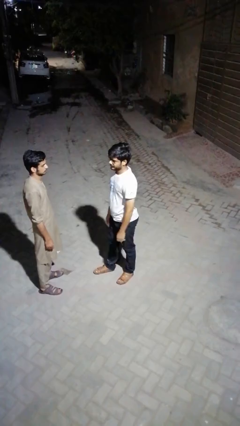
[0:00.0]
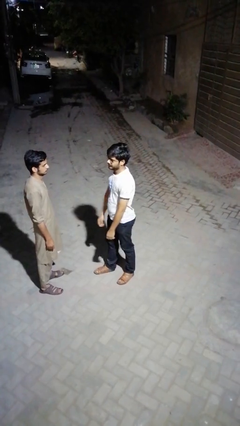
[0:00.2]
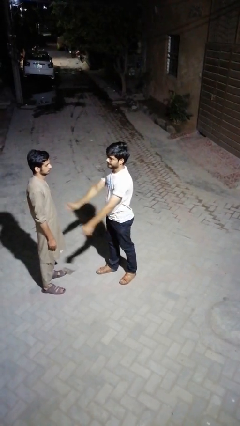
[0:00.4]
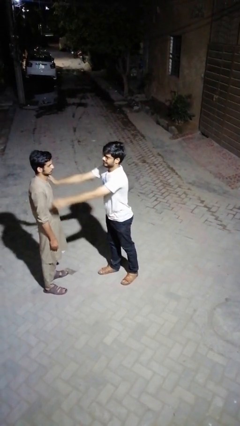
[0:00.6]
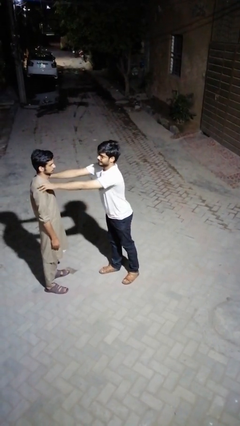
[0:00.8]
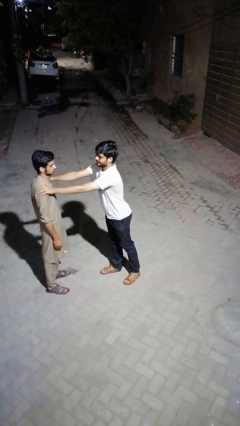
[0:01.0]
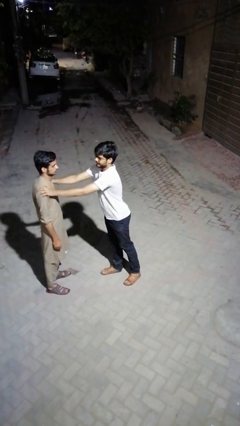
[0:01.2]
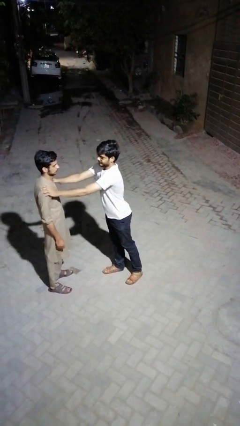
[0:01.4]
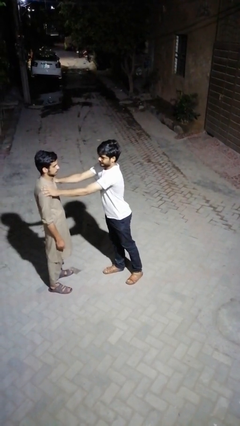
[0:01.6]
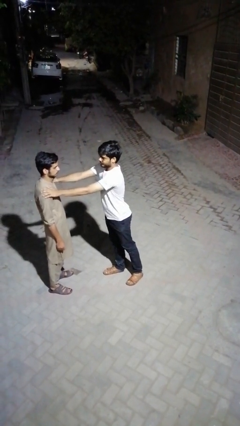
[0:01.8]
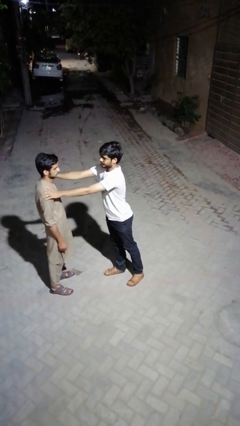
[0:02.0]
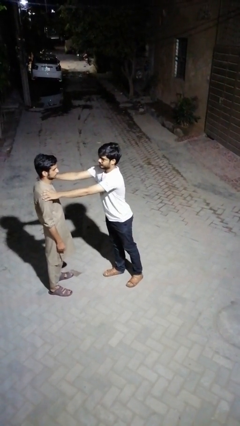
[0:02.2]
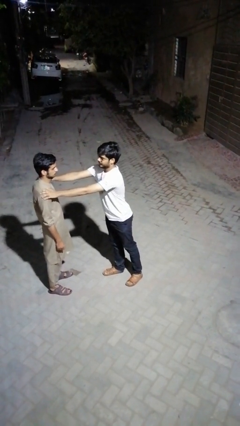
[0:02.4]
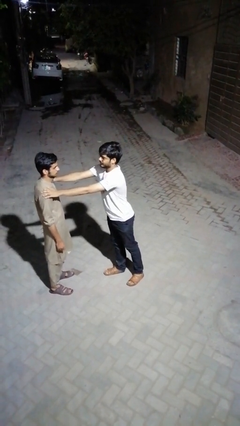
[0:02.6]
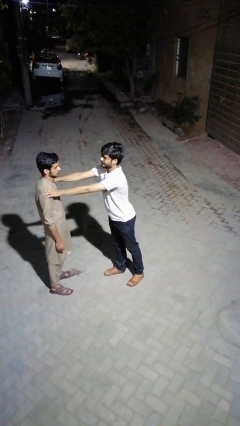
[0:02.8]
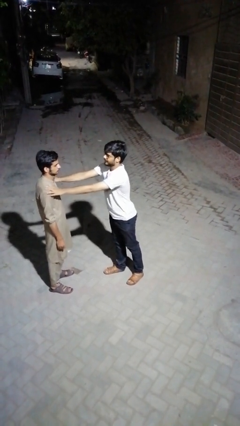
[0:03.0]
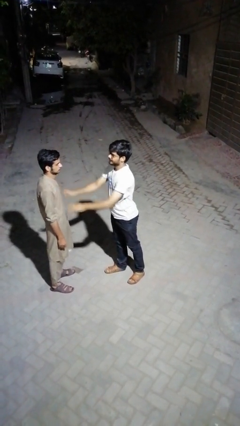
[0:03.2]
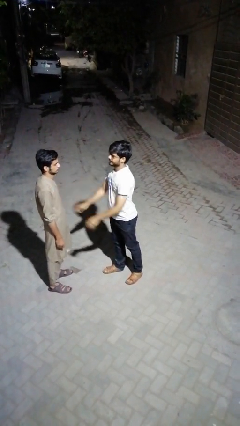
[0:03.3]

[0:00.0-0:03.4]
person pounds shoulders of person

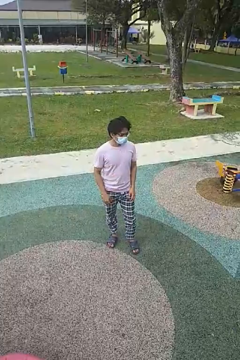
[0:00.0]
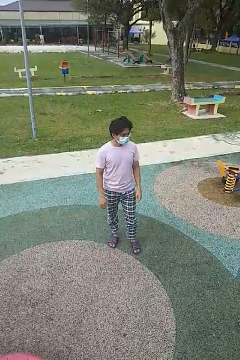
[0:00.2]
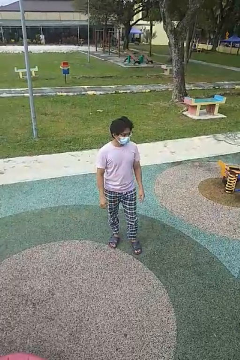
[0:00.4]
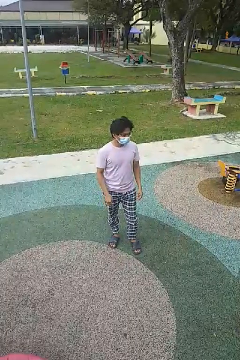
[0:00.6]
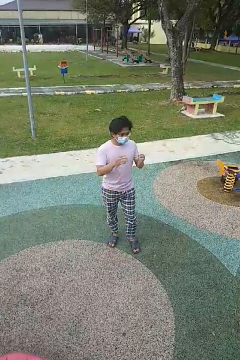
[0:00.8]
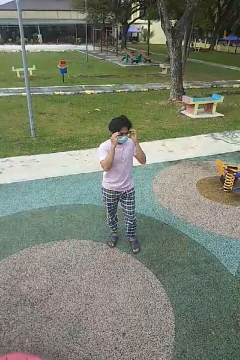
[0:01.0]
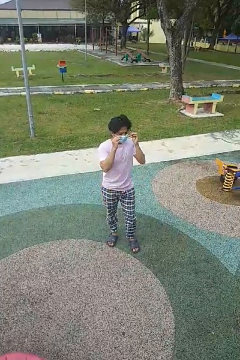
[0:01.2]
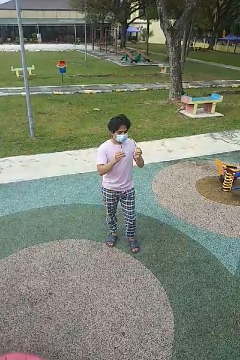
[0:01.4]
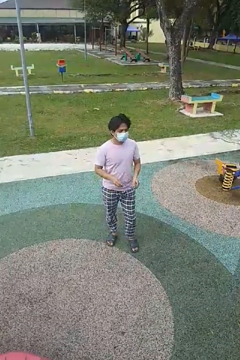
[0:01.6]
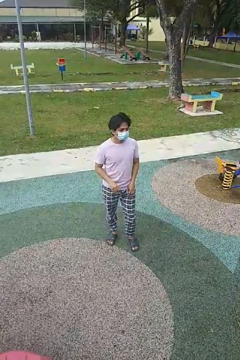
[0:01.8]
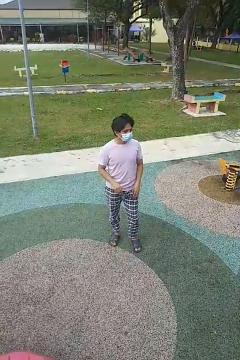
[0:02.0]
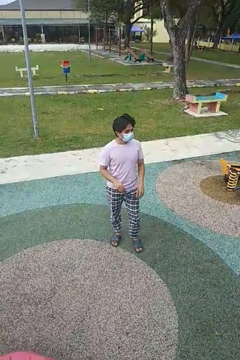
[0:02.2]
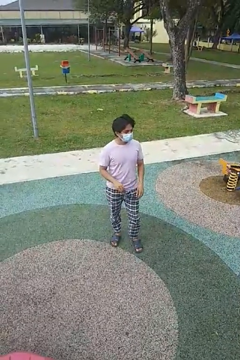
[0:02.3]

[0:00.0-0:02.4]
person takes off glasses

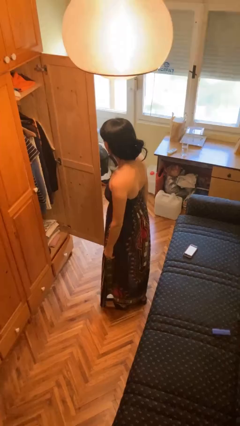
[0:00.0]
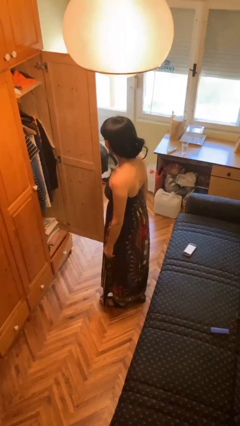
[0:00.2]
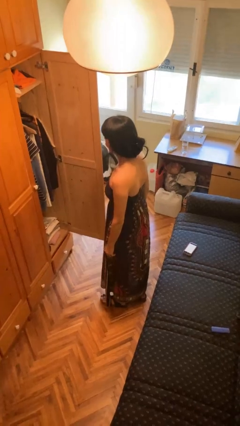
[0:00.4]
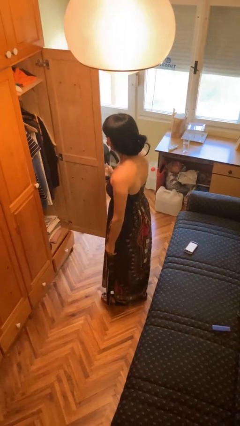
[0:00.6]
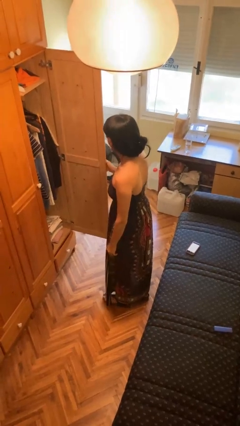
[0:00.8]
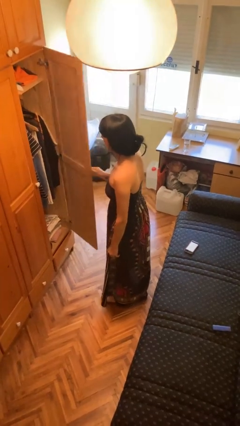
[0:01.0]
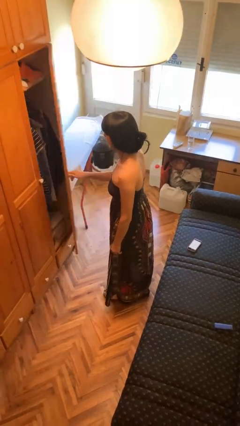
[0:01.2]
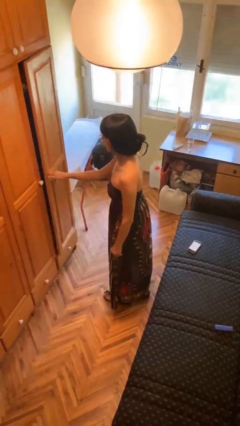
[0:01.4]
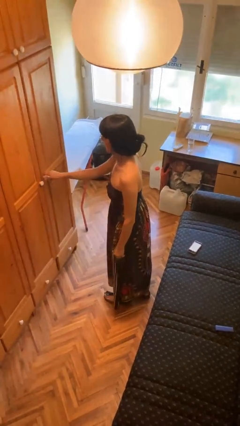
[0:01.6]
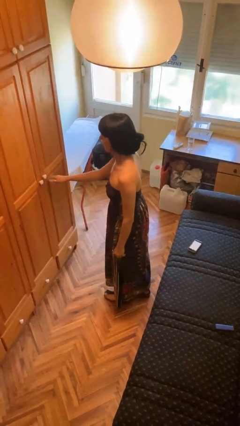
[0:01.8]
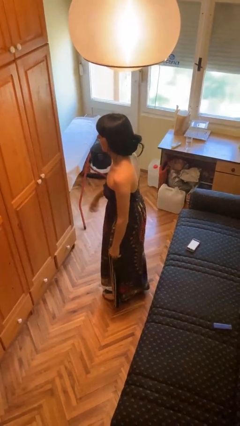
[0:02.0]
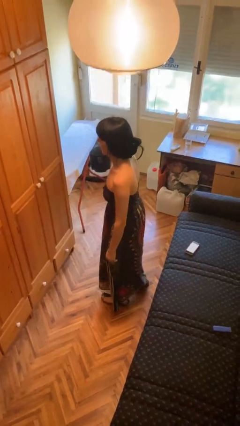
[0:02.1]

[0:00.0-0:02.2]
person closes closet door

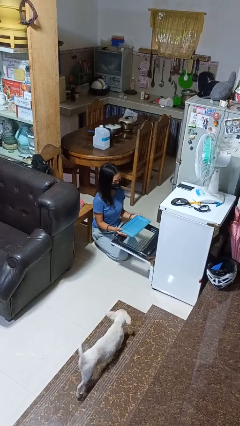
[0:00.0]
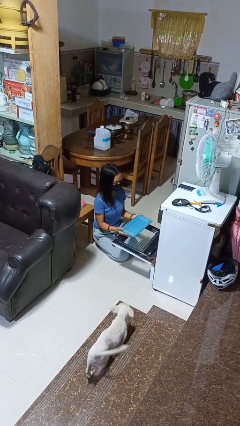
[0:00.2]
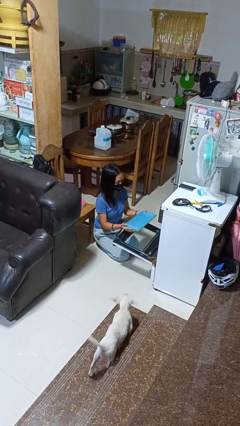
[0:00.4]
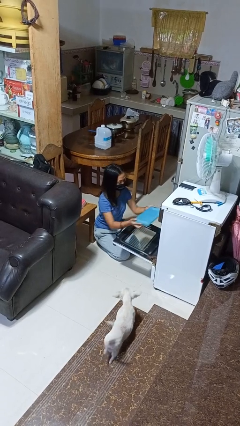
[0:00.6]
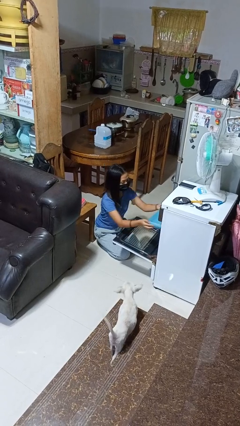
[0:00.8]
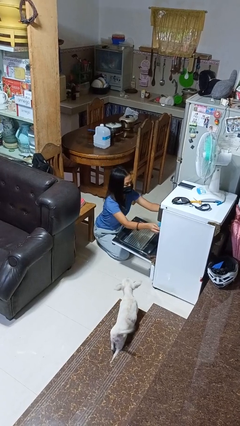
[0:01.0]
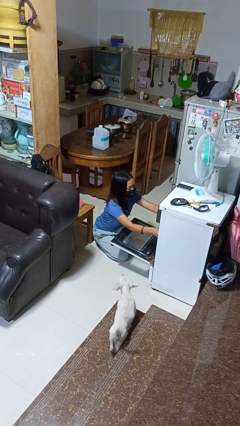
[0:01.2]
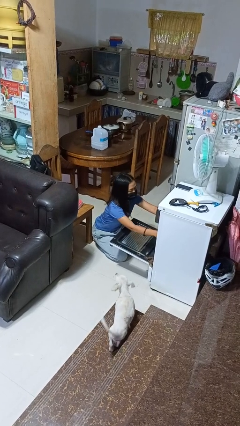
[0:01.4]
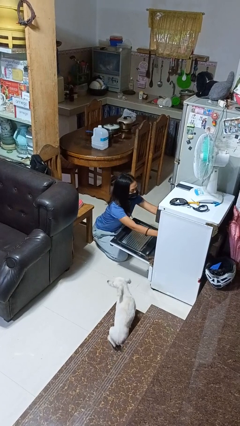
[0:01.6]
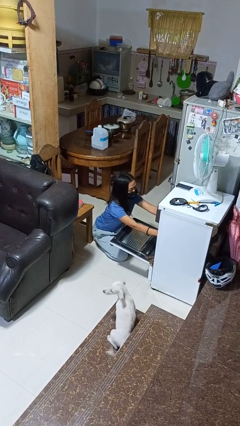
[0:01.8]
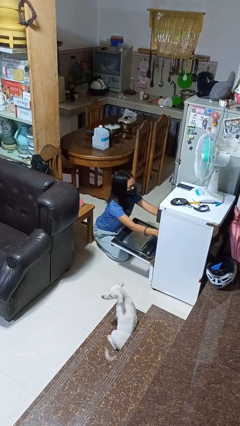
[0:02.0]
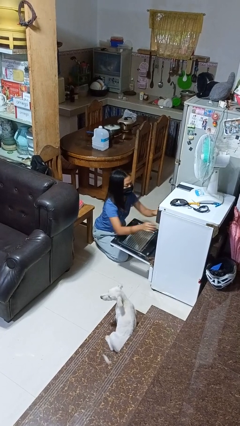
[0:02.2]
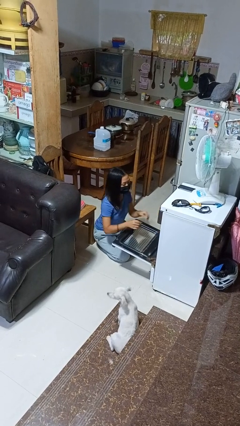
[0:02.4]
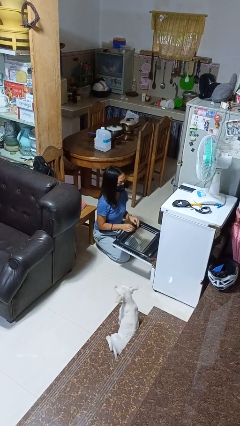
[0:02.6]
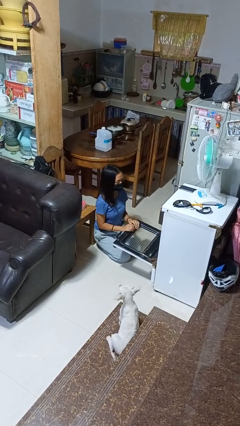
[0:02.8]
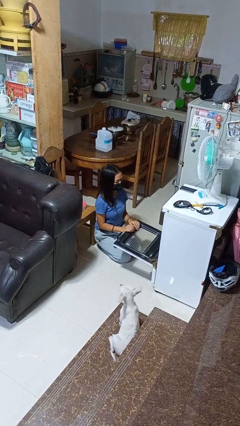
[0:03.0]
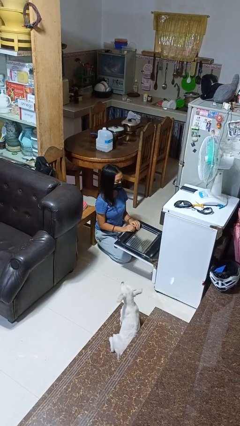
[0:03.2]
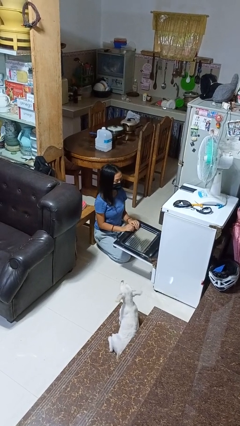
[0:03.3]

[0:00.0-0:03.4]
person puts object into oven

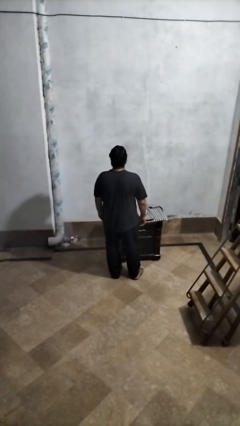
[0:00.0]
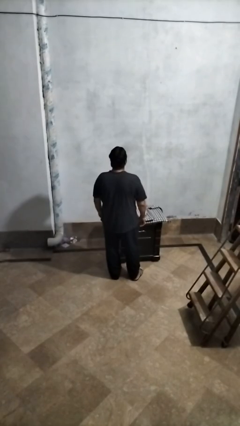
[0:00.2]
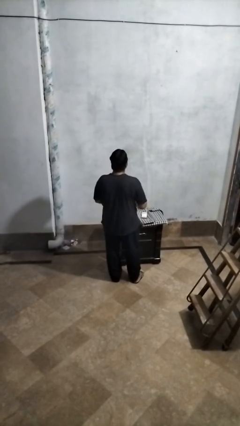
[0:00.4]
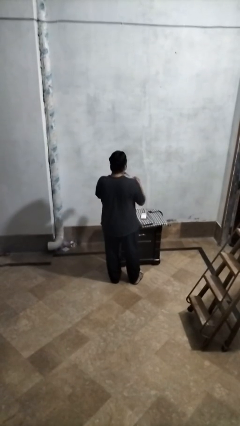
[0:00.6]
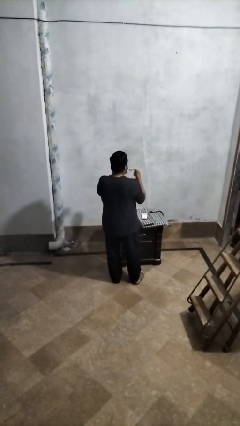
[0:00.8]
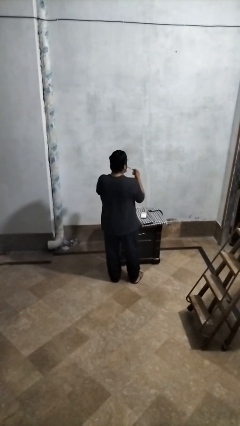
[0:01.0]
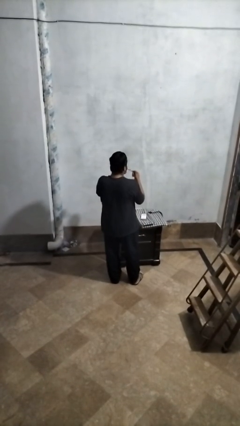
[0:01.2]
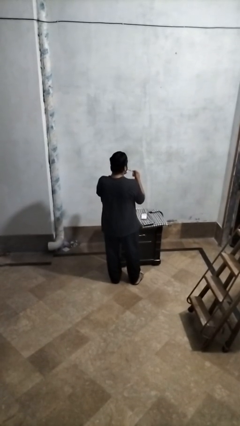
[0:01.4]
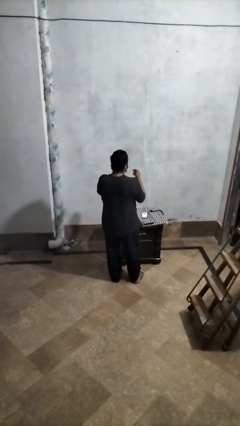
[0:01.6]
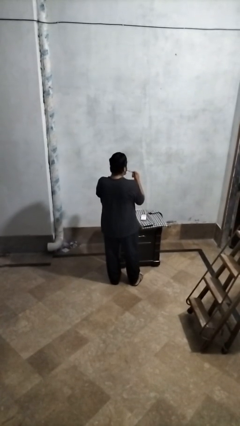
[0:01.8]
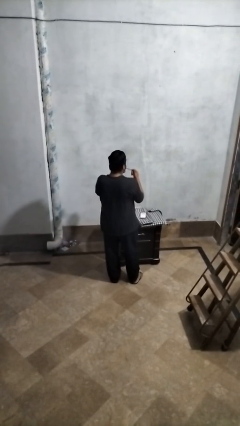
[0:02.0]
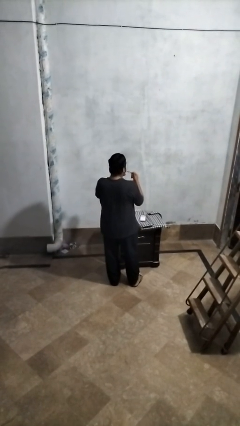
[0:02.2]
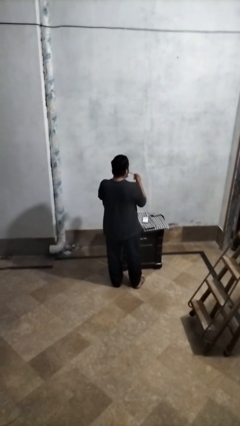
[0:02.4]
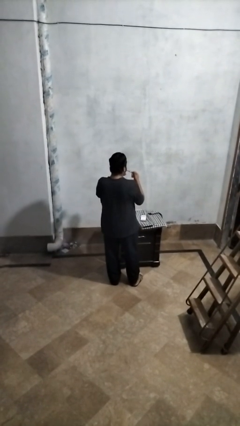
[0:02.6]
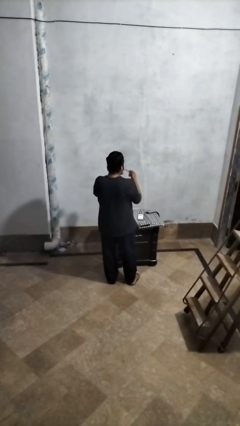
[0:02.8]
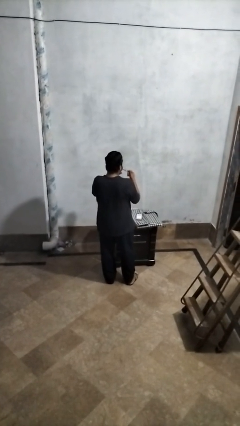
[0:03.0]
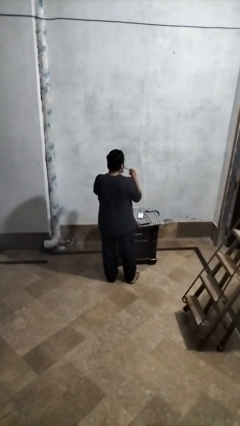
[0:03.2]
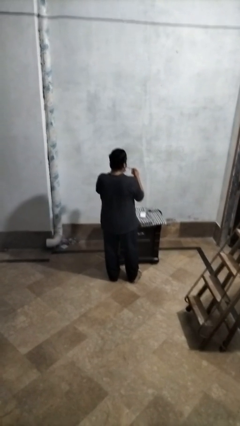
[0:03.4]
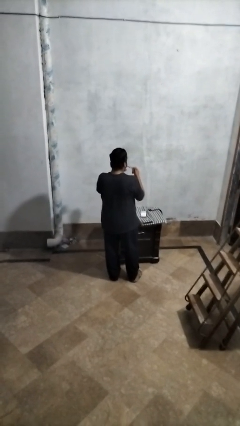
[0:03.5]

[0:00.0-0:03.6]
person clips fingernails

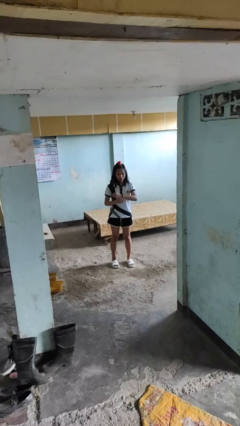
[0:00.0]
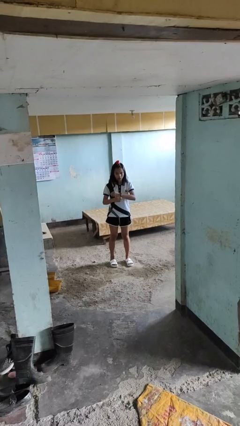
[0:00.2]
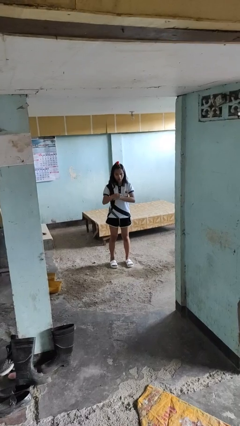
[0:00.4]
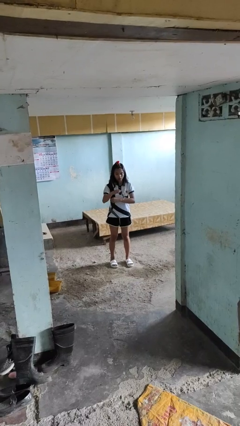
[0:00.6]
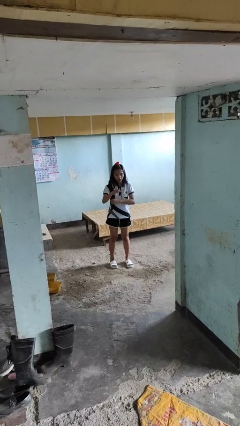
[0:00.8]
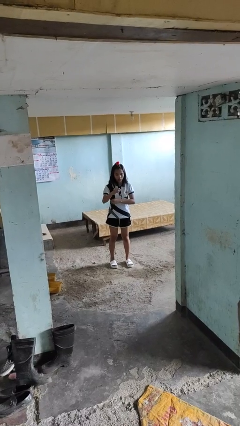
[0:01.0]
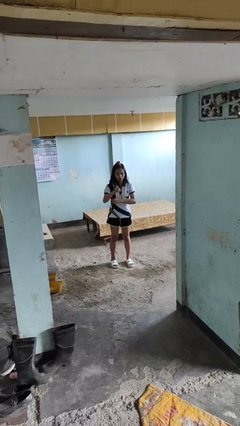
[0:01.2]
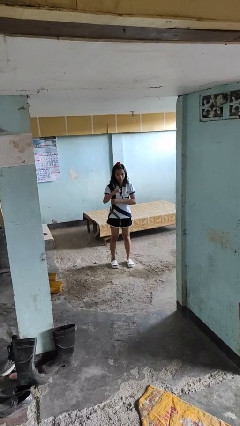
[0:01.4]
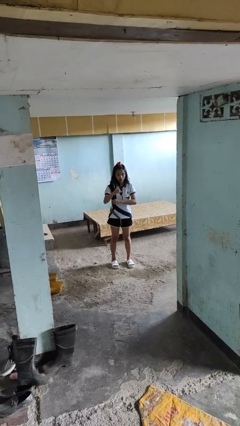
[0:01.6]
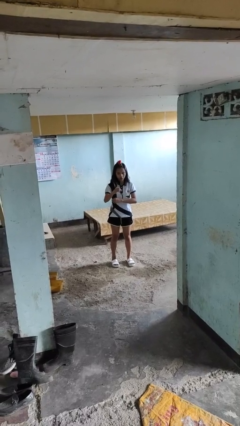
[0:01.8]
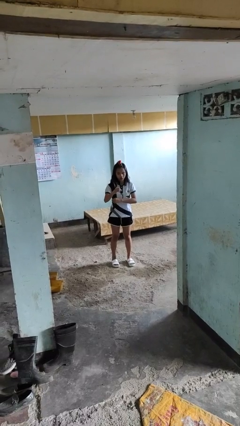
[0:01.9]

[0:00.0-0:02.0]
person takes off wristwatch

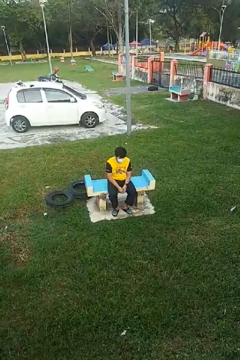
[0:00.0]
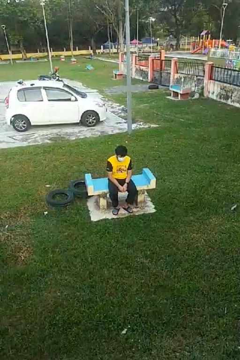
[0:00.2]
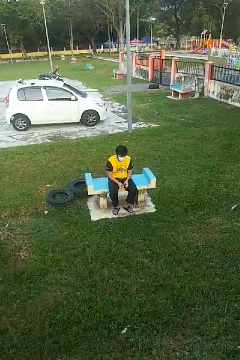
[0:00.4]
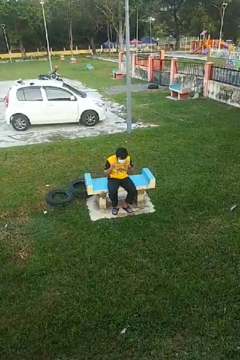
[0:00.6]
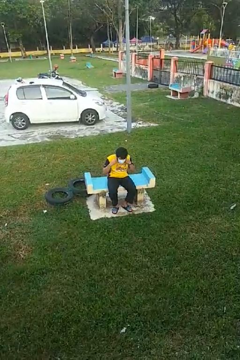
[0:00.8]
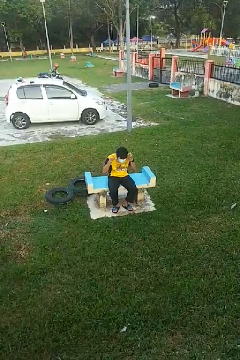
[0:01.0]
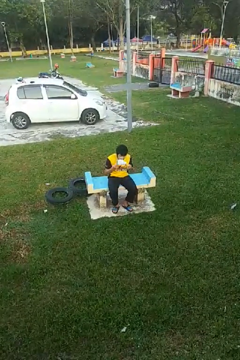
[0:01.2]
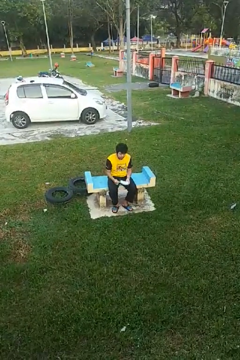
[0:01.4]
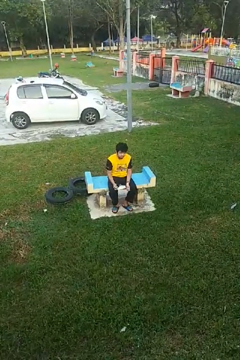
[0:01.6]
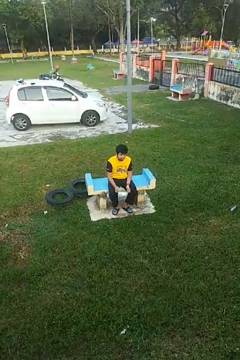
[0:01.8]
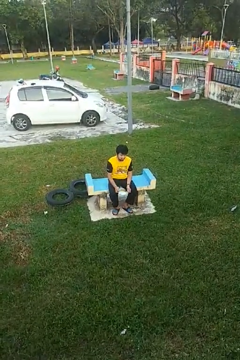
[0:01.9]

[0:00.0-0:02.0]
person takes off facemask
